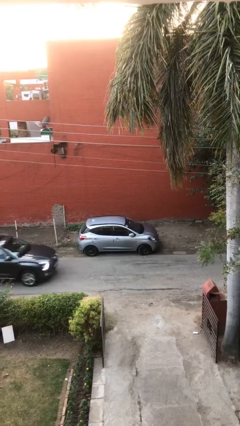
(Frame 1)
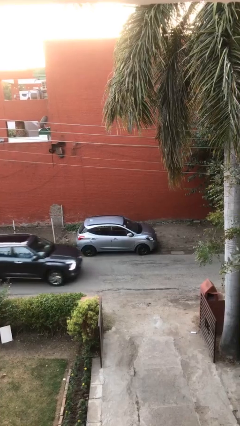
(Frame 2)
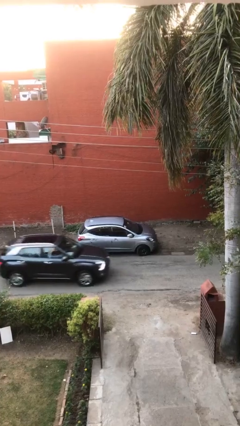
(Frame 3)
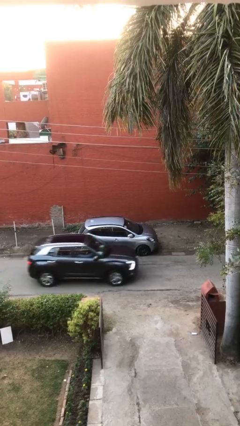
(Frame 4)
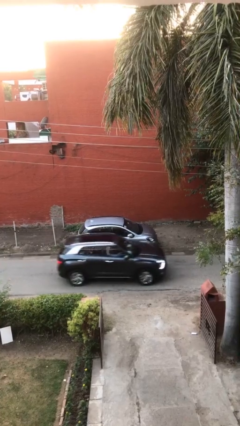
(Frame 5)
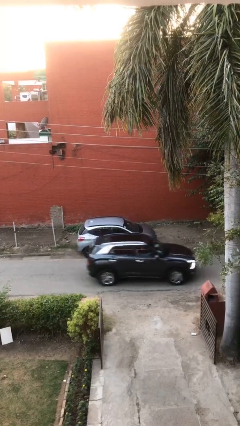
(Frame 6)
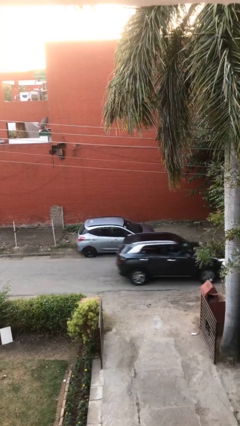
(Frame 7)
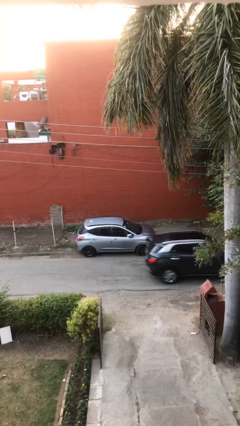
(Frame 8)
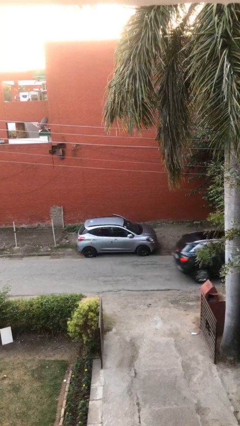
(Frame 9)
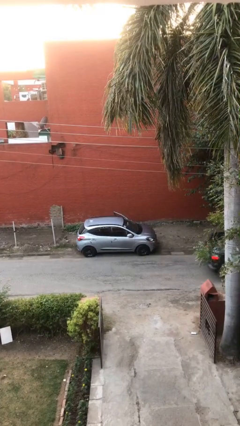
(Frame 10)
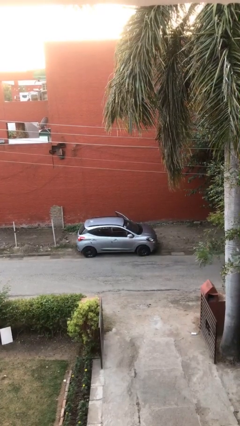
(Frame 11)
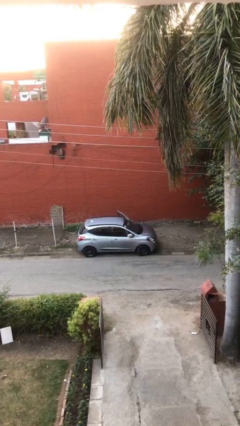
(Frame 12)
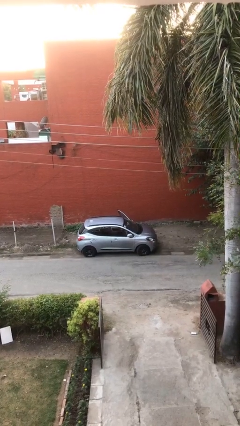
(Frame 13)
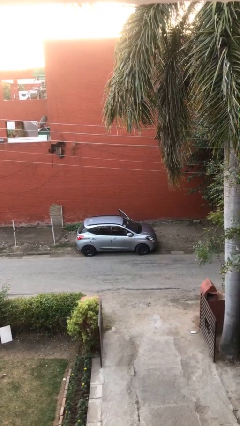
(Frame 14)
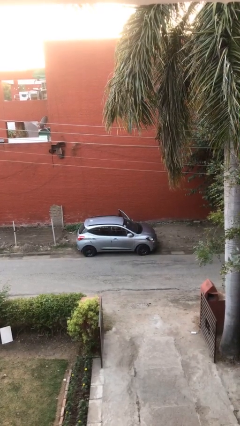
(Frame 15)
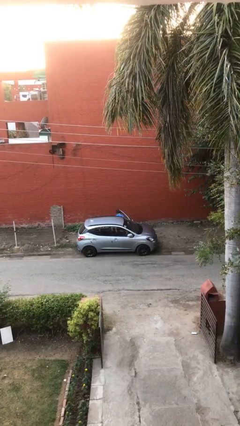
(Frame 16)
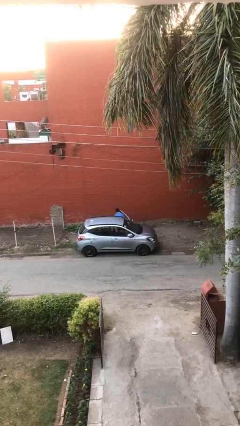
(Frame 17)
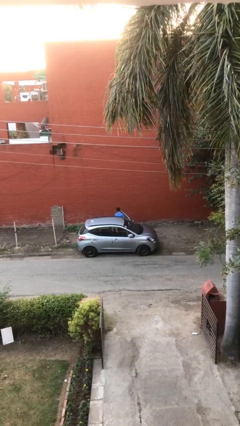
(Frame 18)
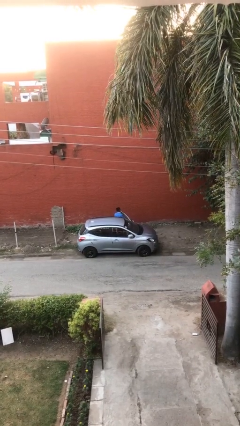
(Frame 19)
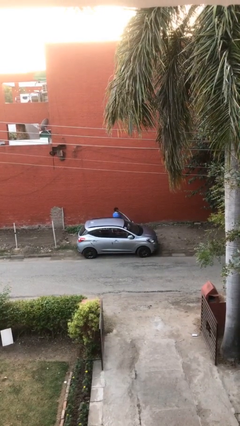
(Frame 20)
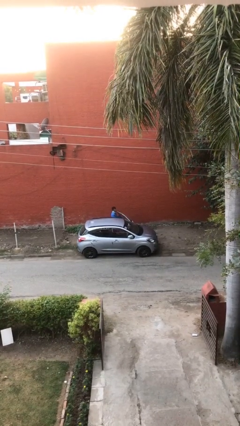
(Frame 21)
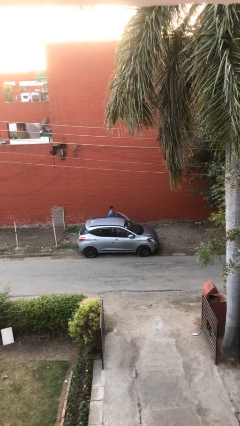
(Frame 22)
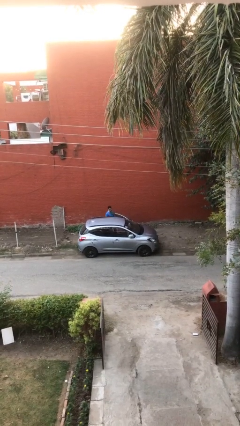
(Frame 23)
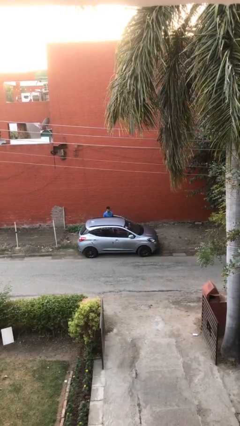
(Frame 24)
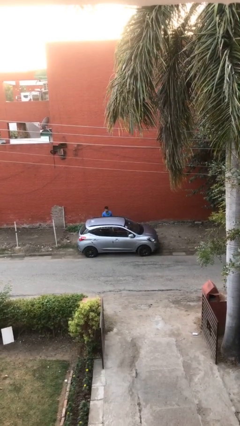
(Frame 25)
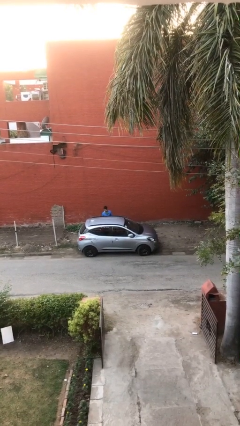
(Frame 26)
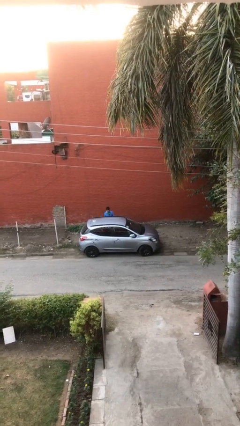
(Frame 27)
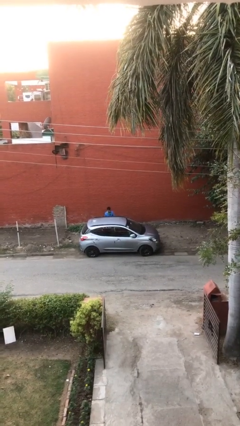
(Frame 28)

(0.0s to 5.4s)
person exits car

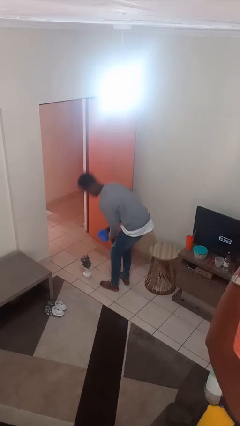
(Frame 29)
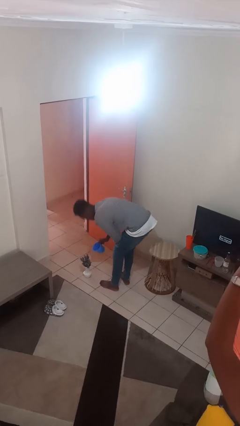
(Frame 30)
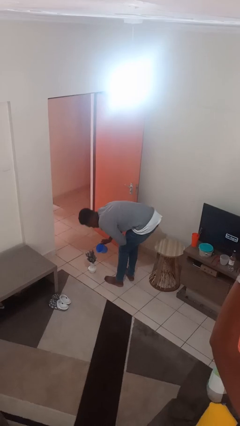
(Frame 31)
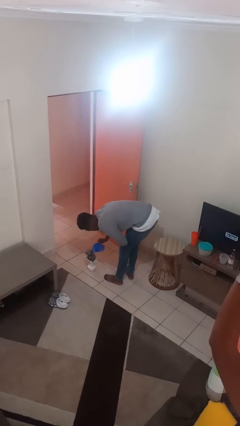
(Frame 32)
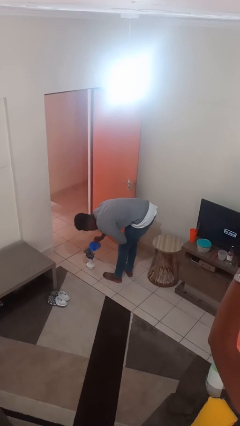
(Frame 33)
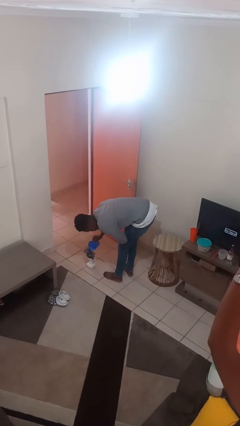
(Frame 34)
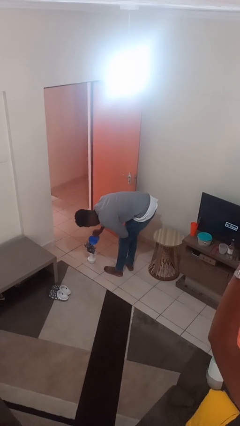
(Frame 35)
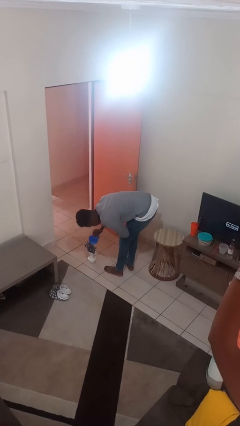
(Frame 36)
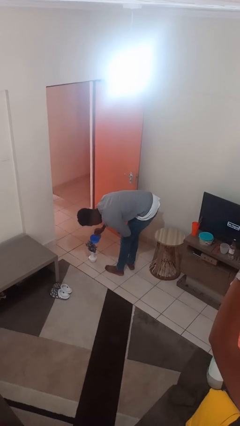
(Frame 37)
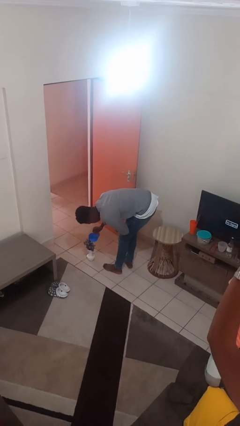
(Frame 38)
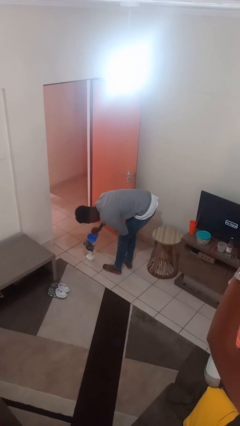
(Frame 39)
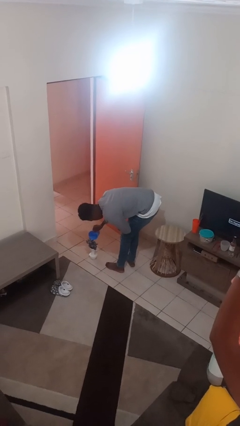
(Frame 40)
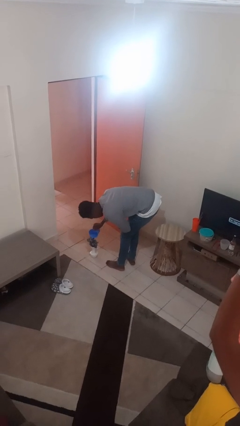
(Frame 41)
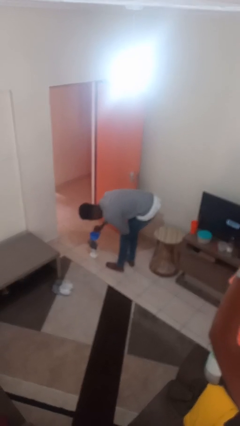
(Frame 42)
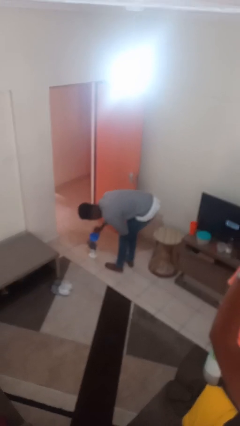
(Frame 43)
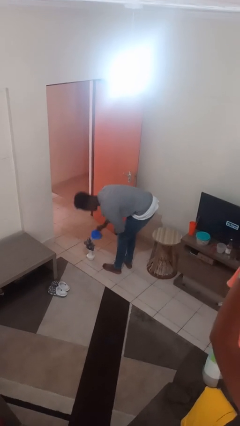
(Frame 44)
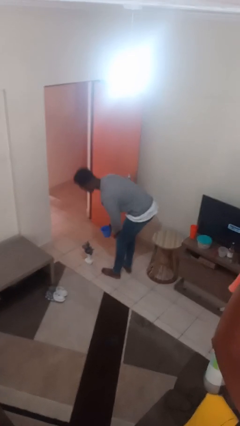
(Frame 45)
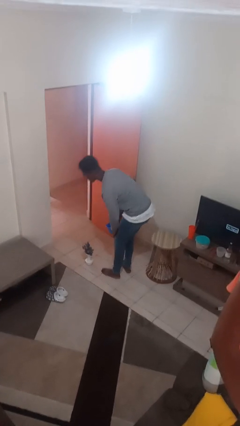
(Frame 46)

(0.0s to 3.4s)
person waters houseplant

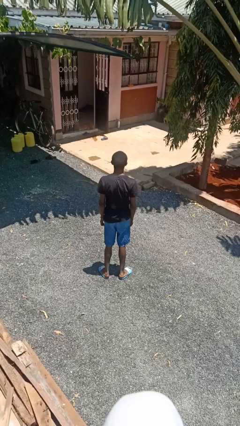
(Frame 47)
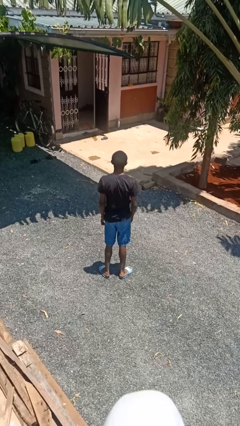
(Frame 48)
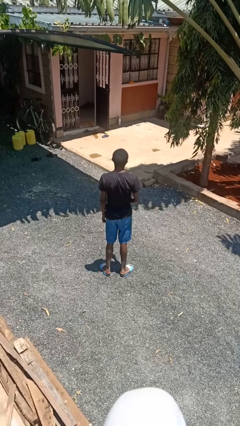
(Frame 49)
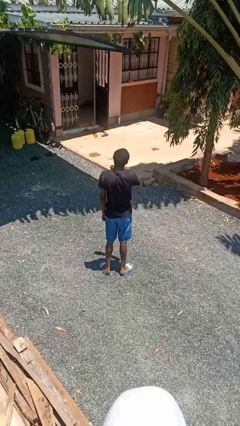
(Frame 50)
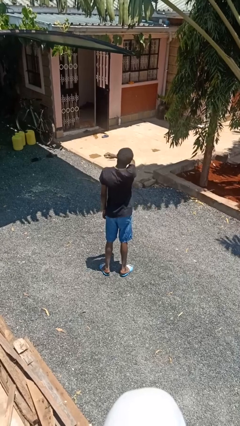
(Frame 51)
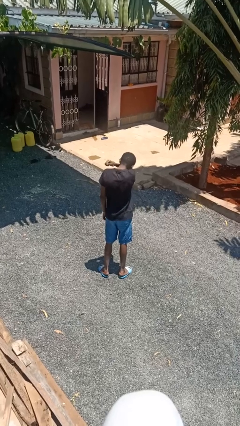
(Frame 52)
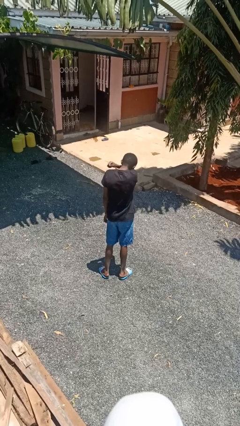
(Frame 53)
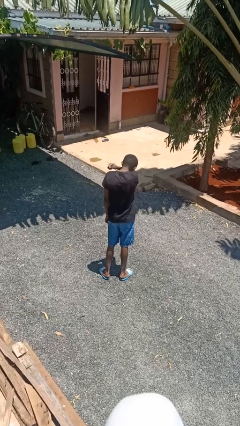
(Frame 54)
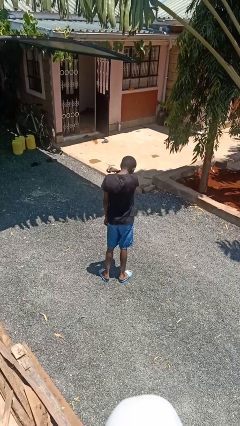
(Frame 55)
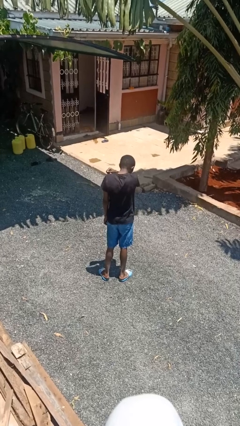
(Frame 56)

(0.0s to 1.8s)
person sneezes into arm

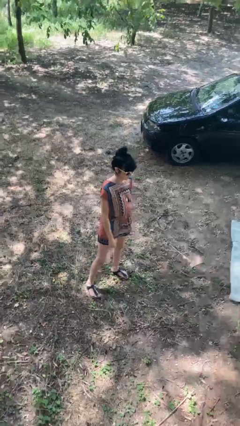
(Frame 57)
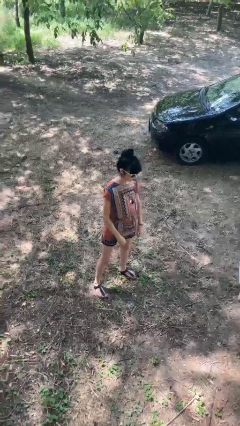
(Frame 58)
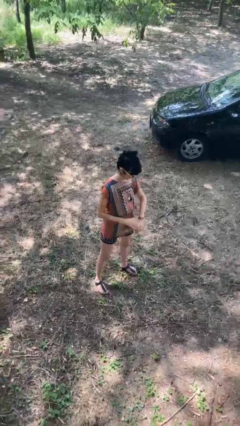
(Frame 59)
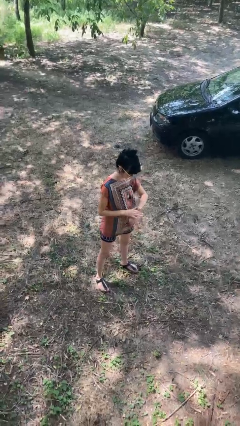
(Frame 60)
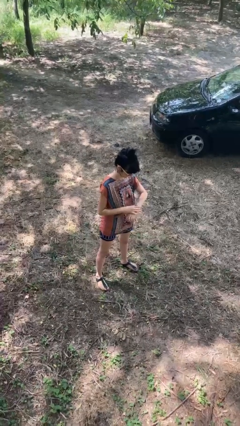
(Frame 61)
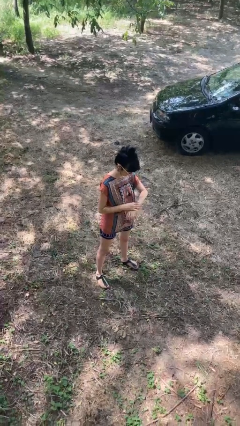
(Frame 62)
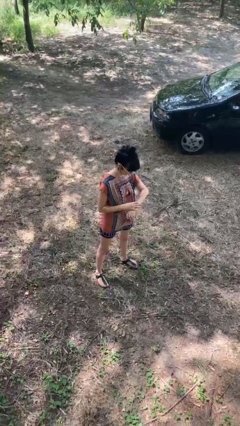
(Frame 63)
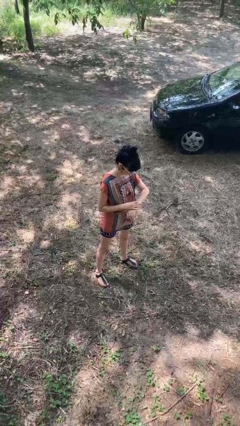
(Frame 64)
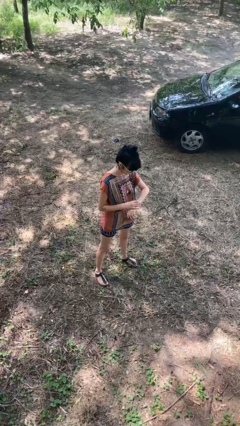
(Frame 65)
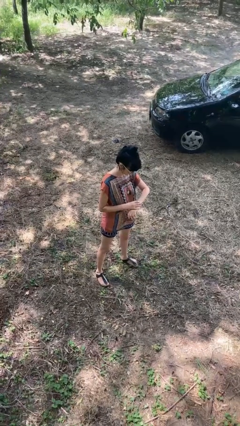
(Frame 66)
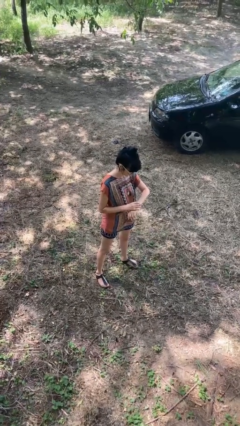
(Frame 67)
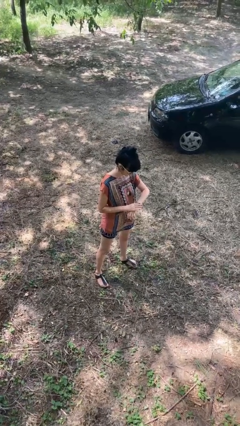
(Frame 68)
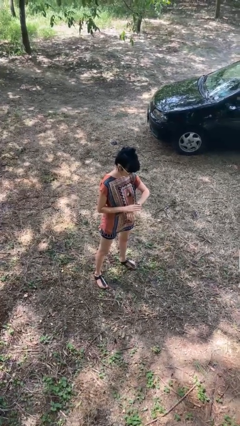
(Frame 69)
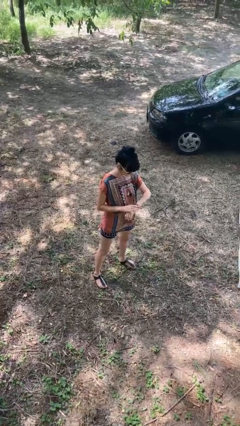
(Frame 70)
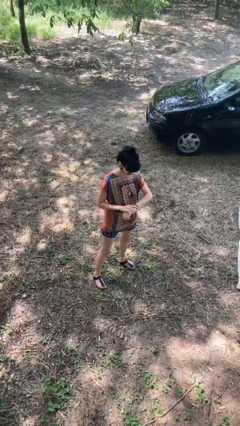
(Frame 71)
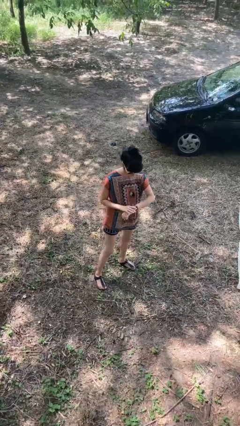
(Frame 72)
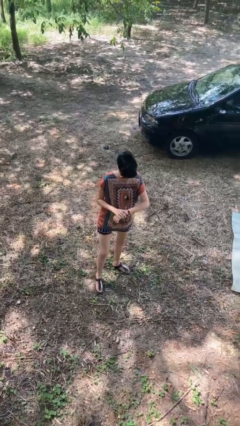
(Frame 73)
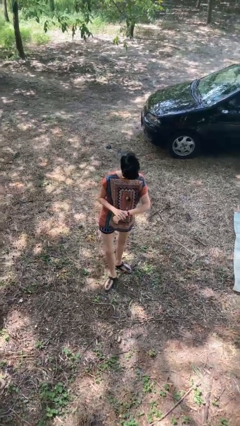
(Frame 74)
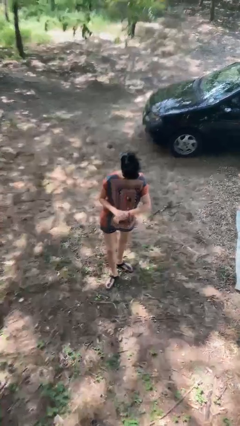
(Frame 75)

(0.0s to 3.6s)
person looks at wristwatch

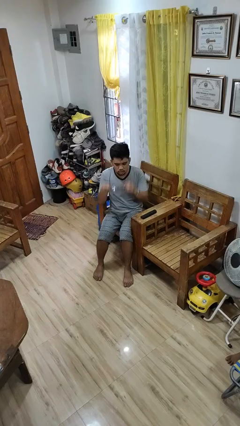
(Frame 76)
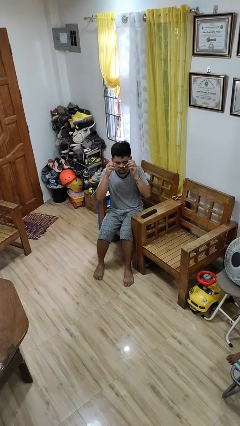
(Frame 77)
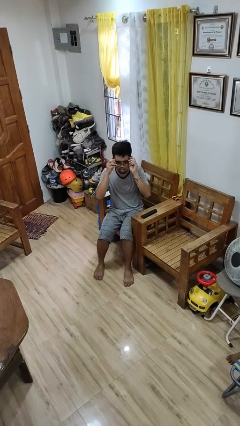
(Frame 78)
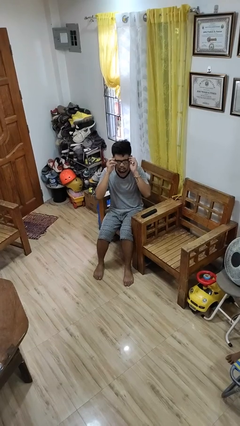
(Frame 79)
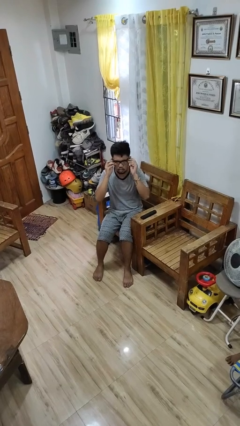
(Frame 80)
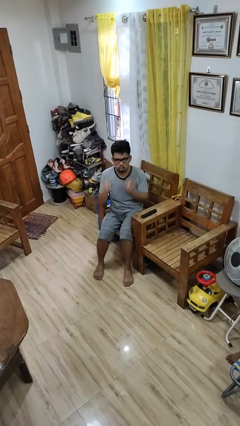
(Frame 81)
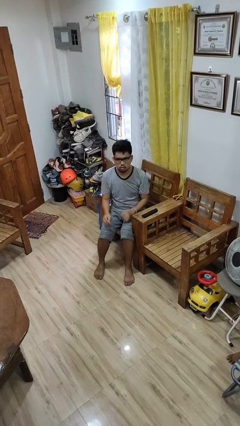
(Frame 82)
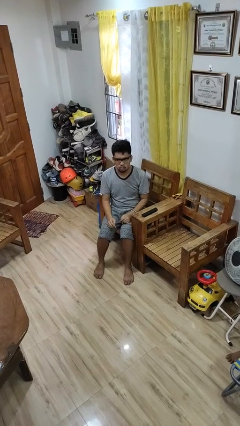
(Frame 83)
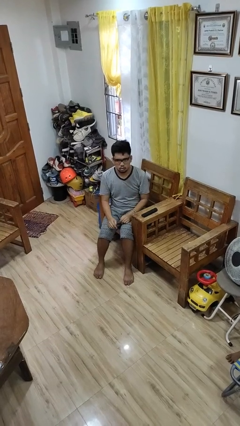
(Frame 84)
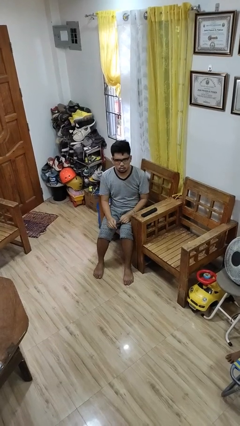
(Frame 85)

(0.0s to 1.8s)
person puts on glasses

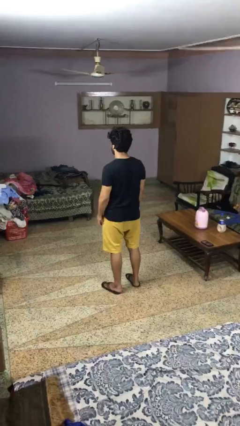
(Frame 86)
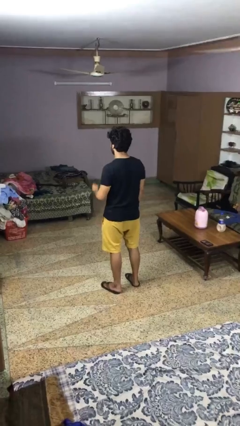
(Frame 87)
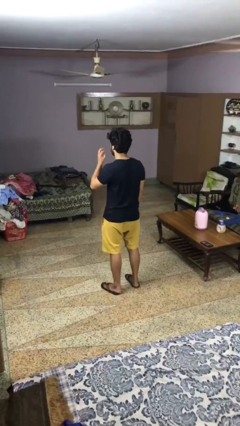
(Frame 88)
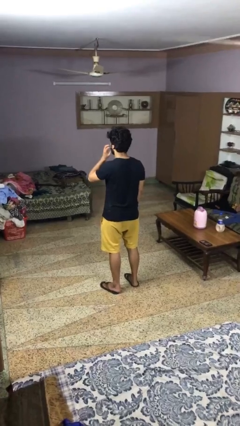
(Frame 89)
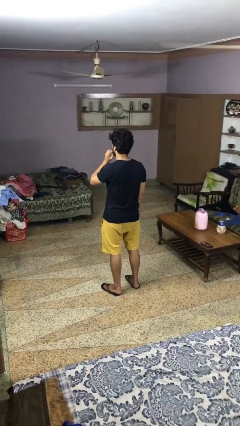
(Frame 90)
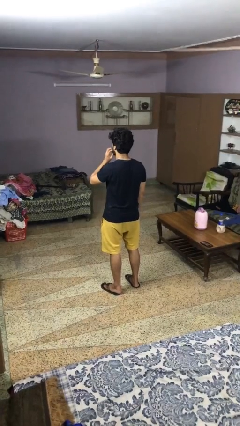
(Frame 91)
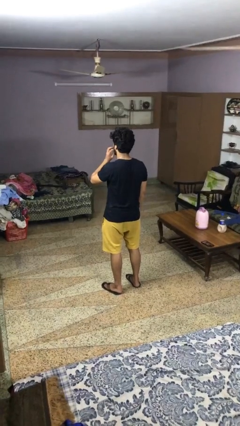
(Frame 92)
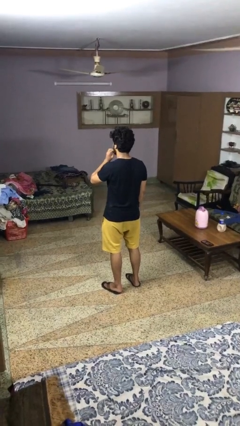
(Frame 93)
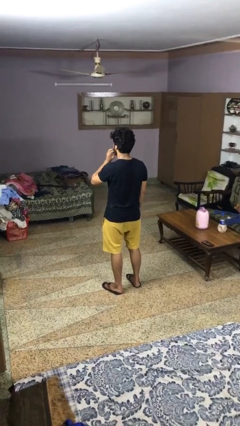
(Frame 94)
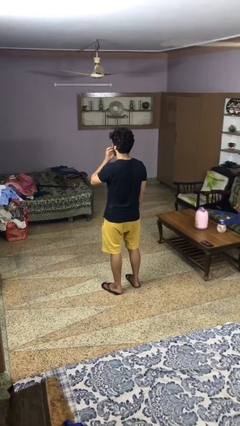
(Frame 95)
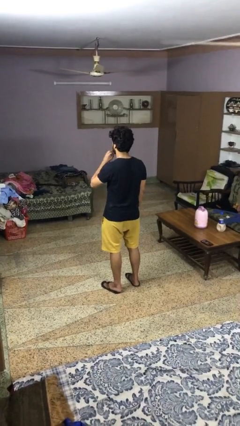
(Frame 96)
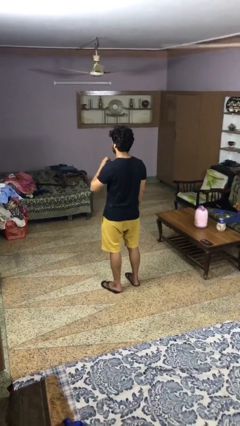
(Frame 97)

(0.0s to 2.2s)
person scratches face
